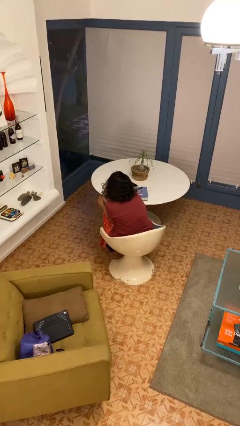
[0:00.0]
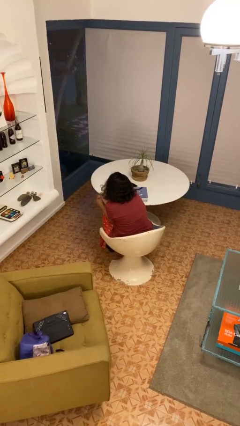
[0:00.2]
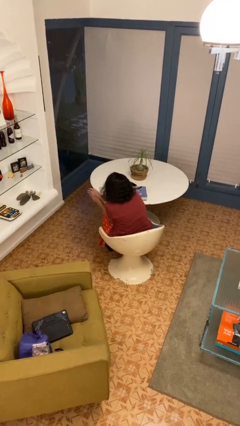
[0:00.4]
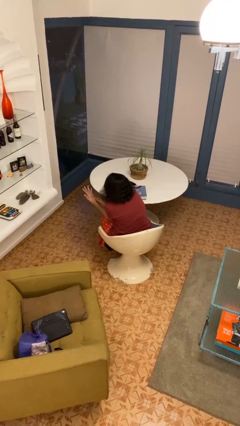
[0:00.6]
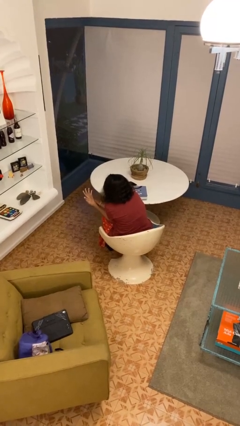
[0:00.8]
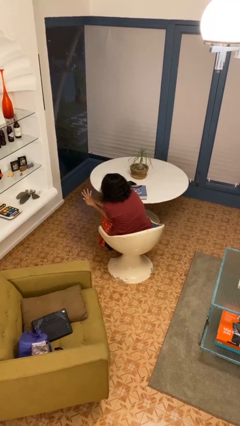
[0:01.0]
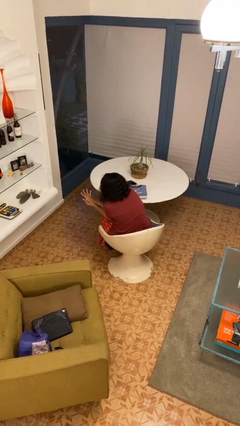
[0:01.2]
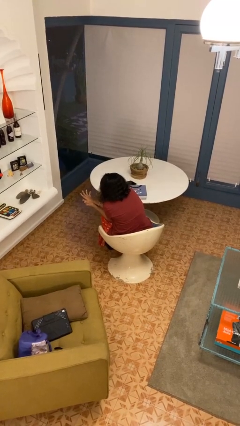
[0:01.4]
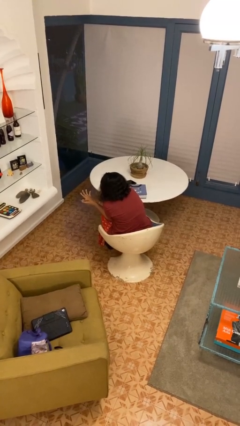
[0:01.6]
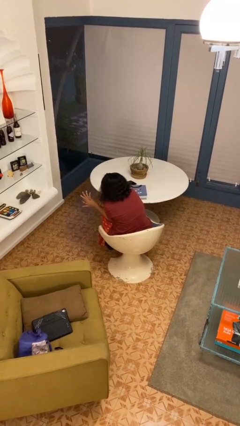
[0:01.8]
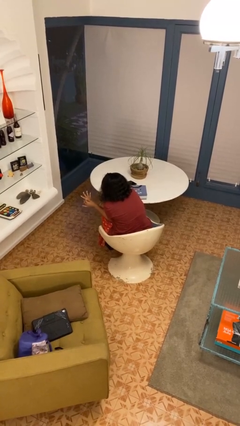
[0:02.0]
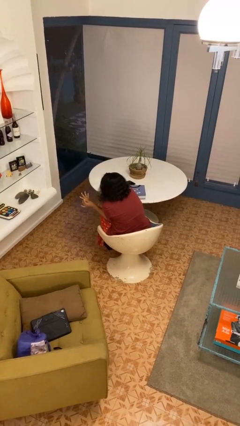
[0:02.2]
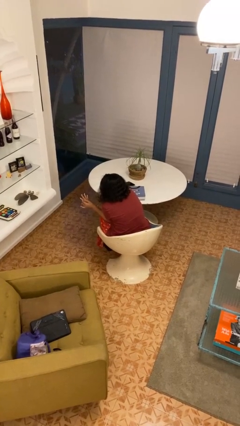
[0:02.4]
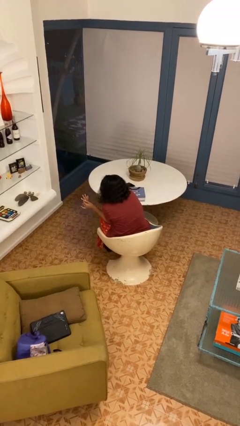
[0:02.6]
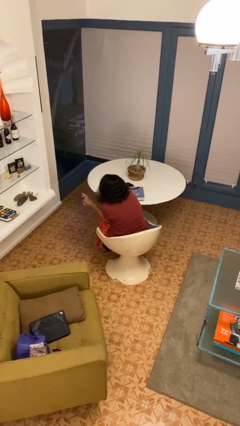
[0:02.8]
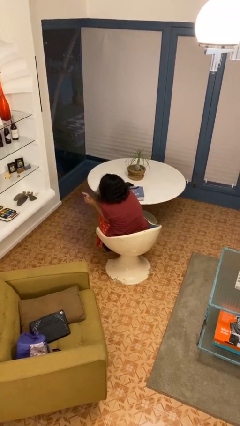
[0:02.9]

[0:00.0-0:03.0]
person looks at hands in lap

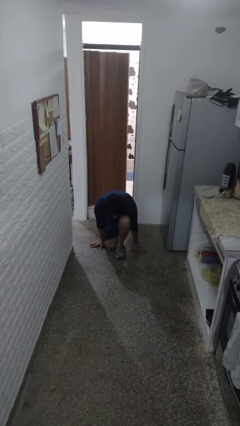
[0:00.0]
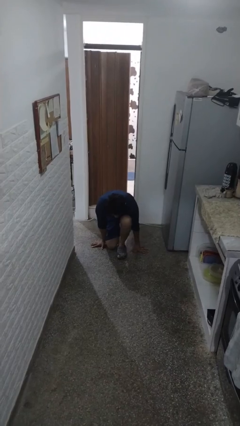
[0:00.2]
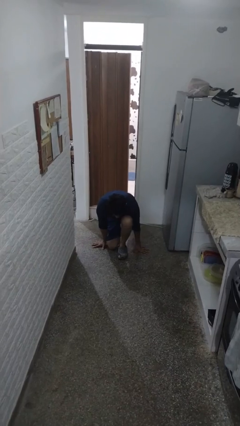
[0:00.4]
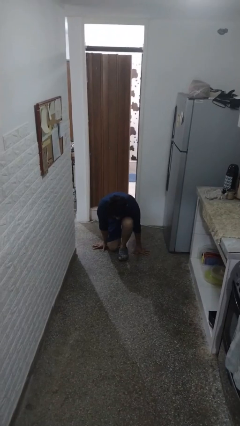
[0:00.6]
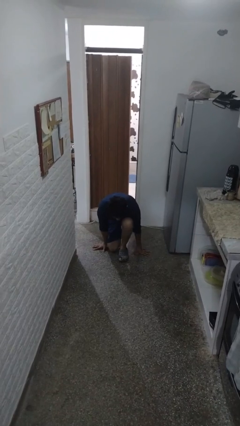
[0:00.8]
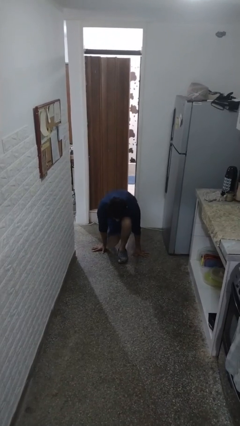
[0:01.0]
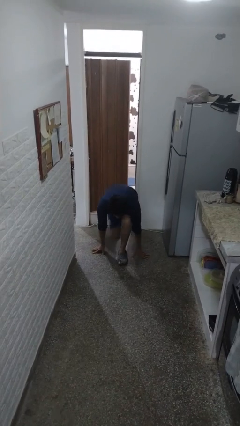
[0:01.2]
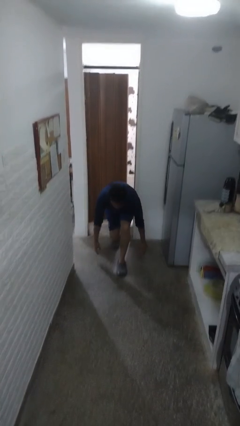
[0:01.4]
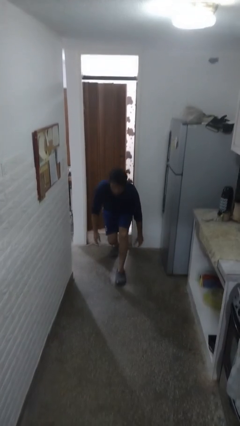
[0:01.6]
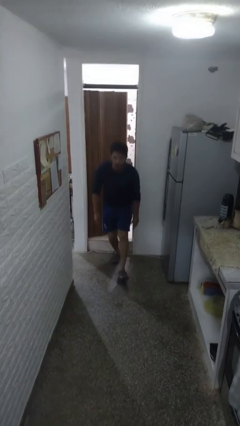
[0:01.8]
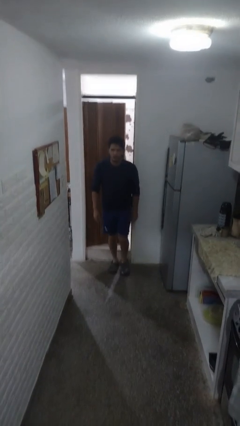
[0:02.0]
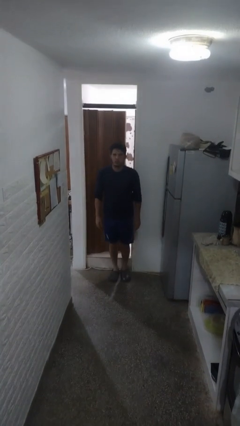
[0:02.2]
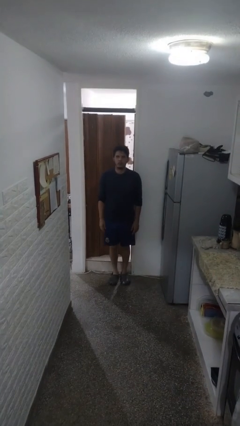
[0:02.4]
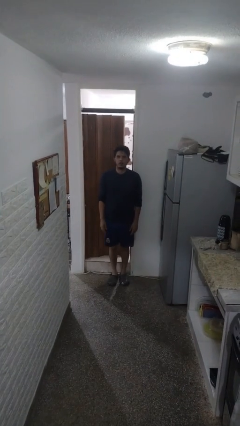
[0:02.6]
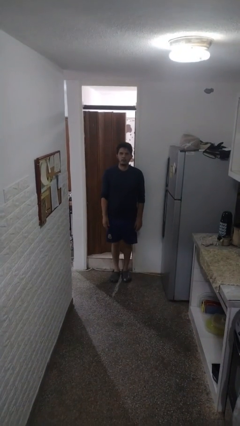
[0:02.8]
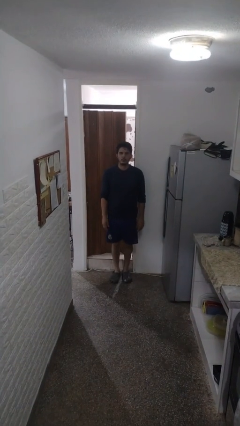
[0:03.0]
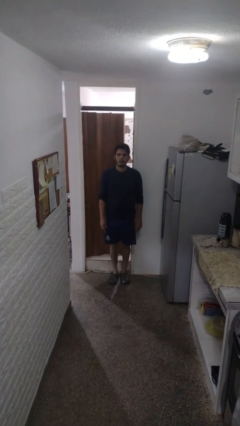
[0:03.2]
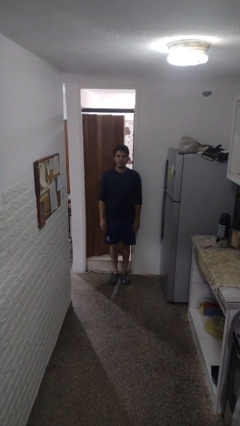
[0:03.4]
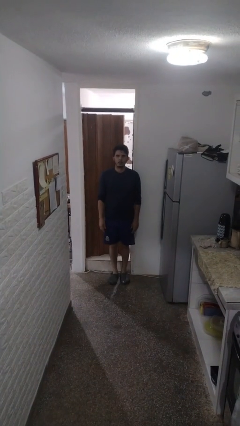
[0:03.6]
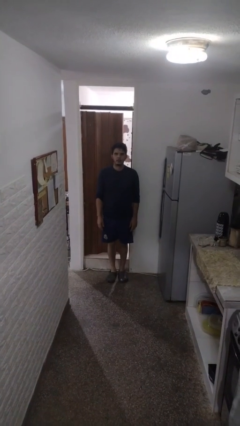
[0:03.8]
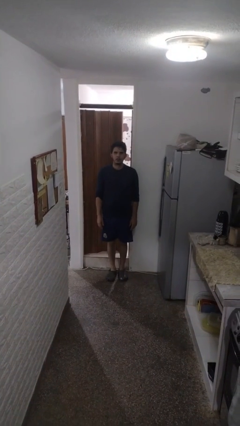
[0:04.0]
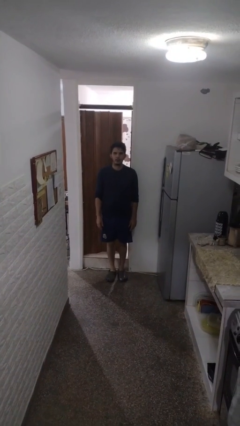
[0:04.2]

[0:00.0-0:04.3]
person stands up from floor

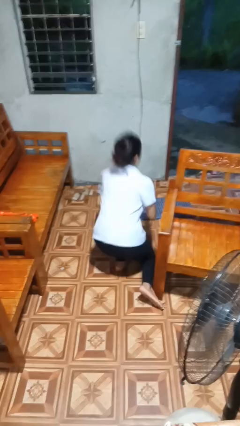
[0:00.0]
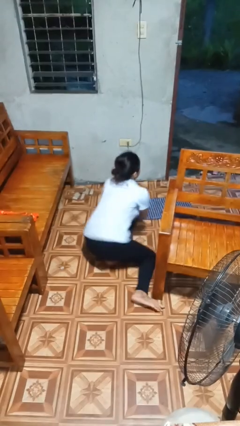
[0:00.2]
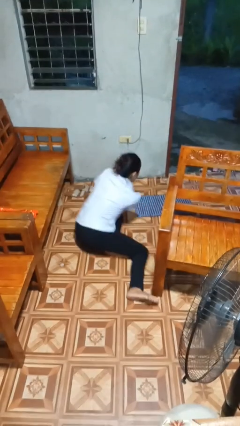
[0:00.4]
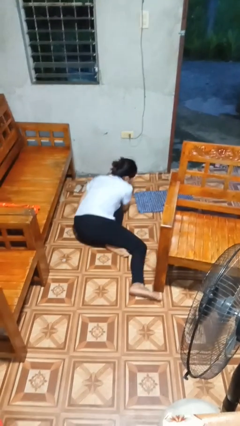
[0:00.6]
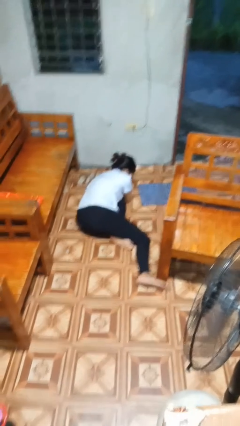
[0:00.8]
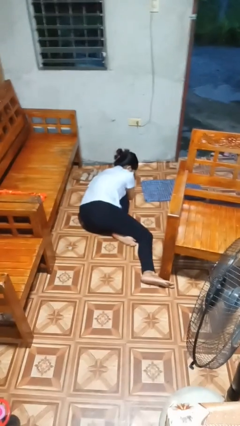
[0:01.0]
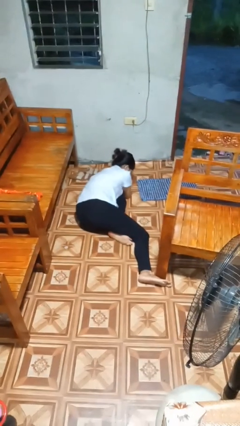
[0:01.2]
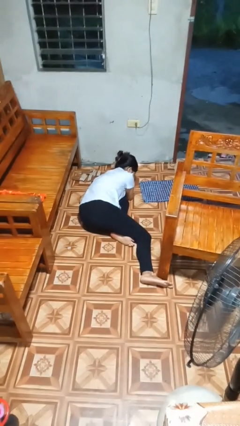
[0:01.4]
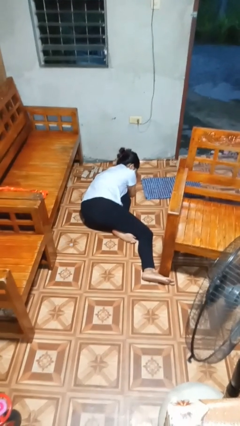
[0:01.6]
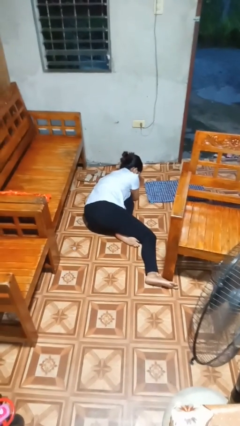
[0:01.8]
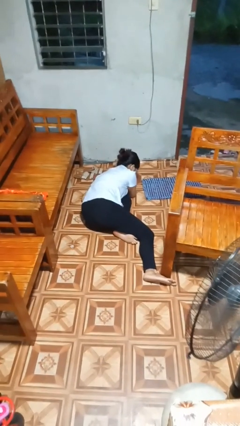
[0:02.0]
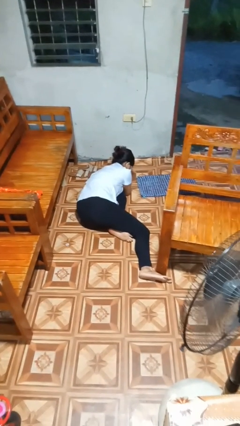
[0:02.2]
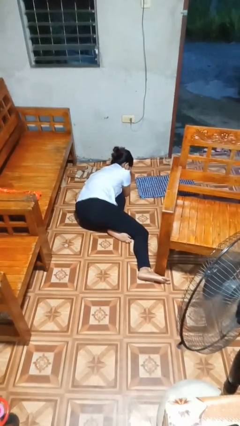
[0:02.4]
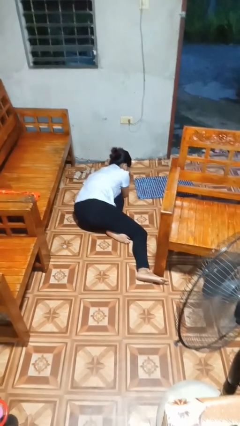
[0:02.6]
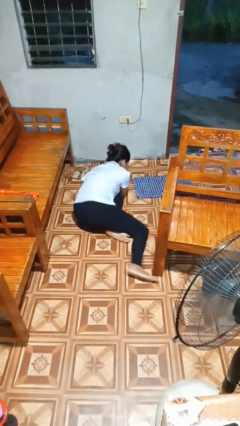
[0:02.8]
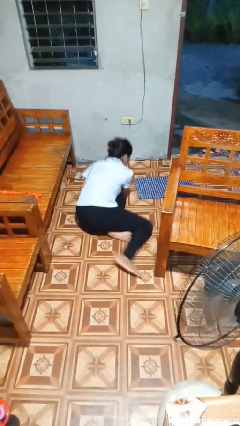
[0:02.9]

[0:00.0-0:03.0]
person lies down on floor

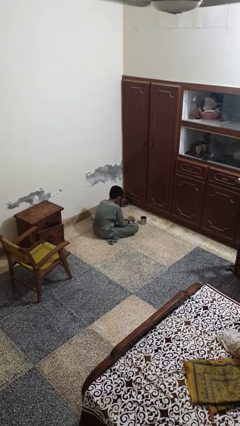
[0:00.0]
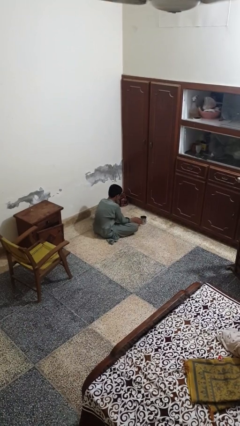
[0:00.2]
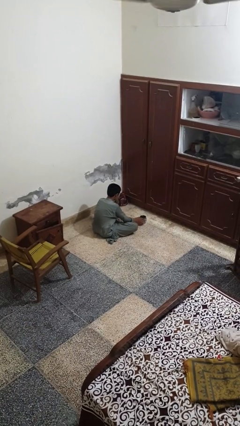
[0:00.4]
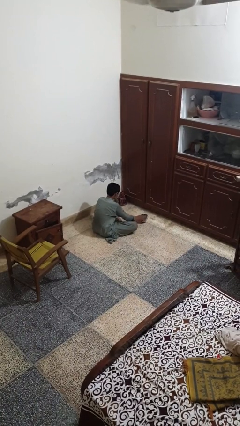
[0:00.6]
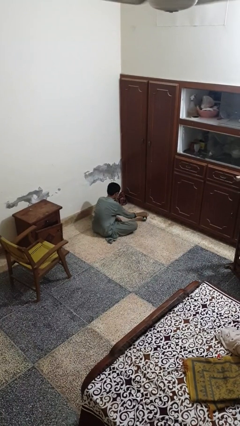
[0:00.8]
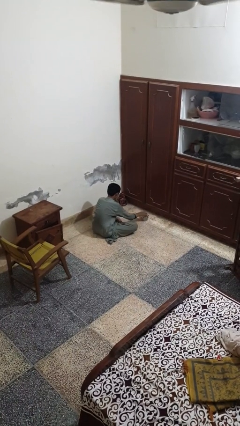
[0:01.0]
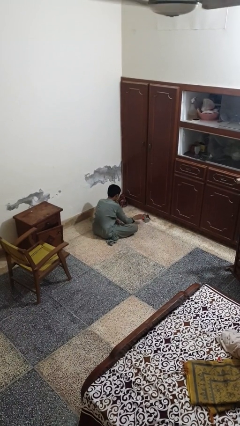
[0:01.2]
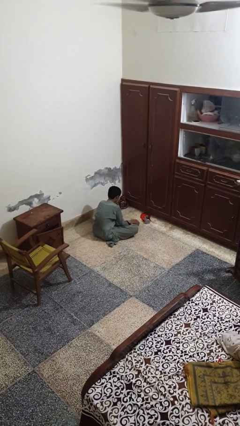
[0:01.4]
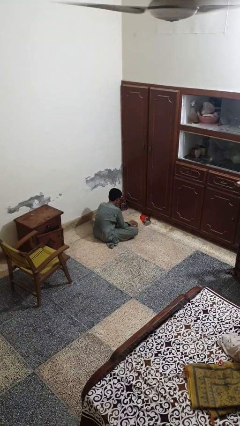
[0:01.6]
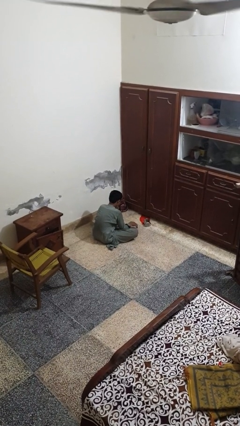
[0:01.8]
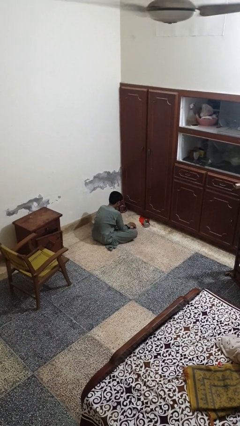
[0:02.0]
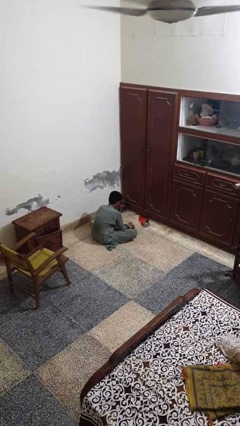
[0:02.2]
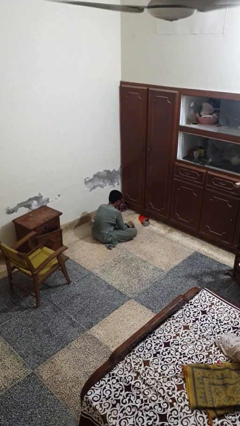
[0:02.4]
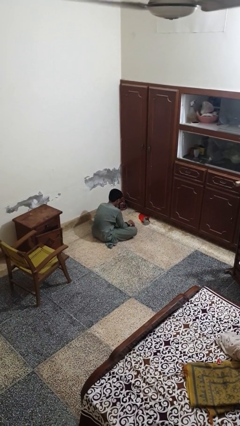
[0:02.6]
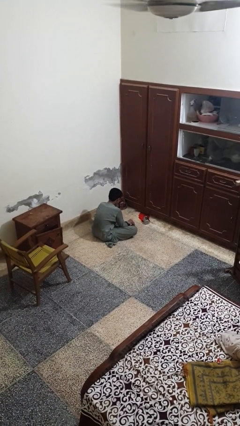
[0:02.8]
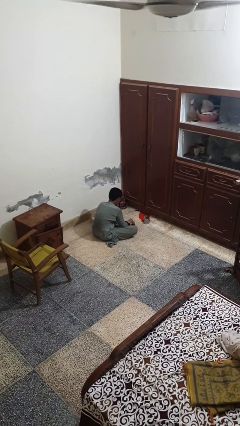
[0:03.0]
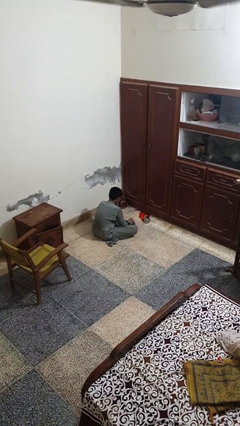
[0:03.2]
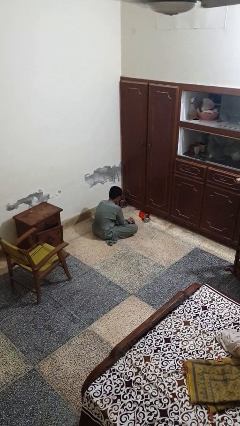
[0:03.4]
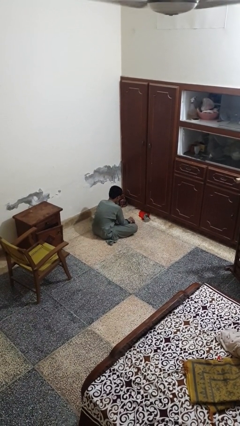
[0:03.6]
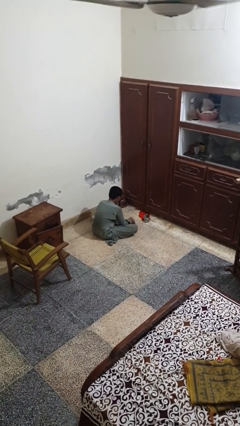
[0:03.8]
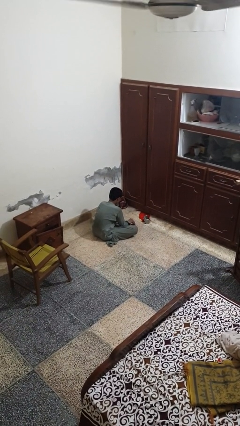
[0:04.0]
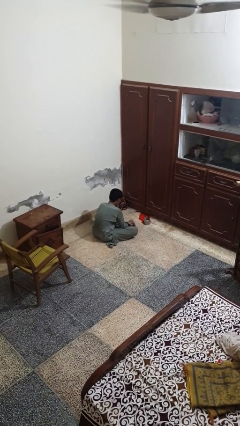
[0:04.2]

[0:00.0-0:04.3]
person spills on floor

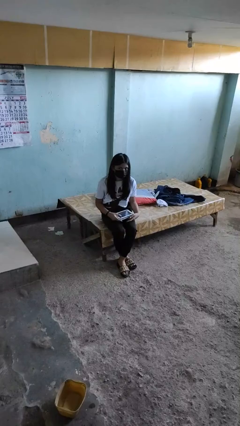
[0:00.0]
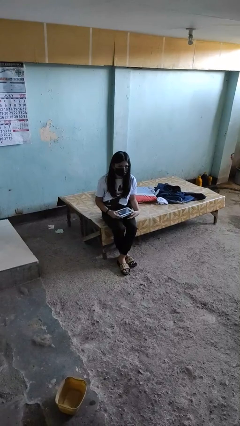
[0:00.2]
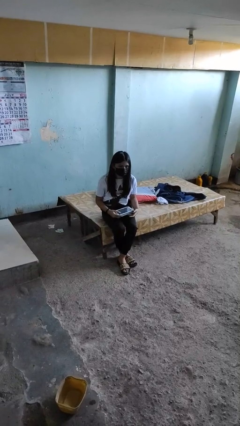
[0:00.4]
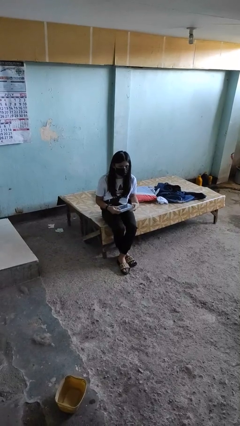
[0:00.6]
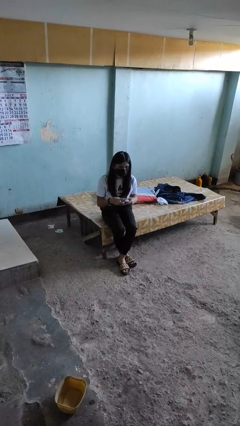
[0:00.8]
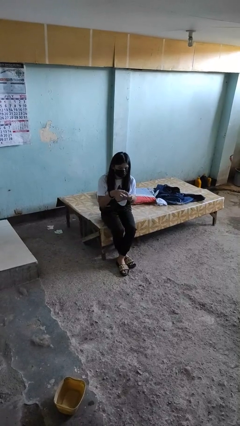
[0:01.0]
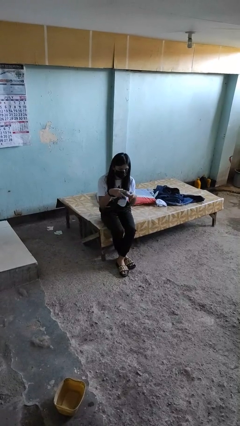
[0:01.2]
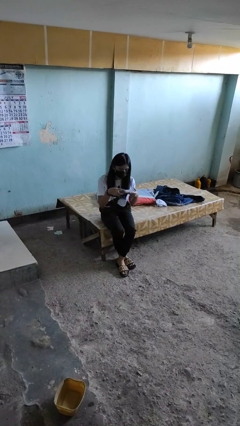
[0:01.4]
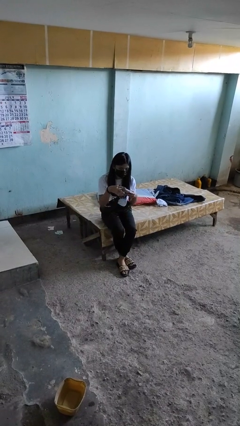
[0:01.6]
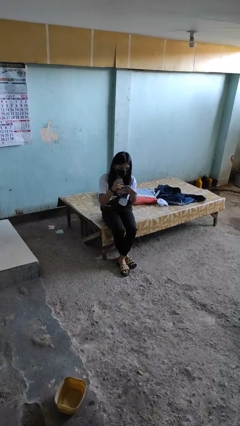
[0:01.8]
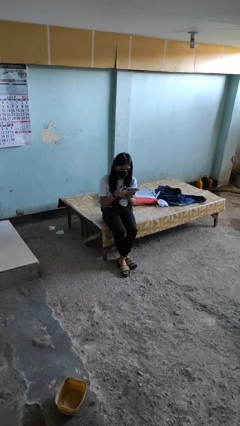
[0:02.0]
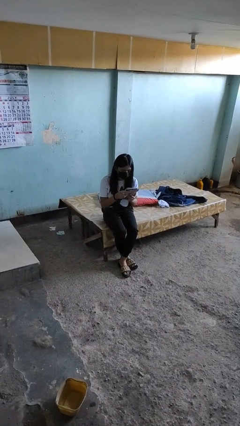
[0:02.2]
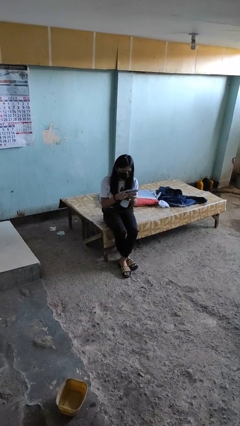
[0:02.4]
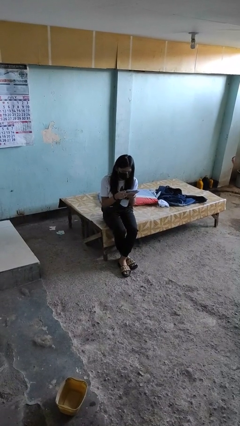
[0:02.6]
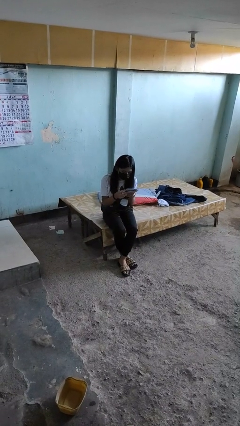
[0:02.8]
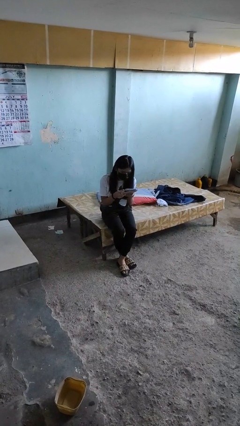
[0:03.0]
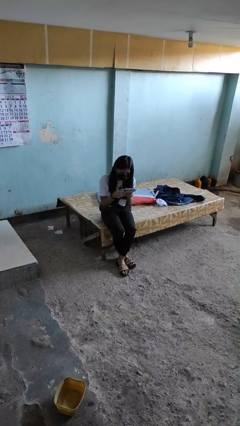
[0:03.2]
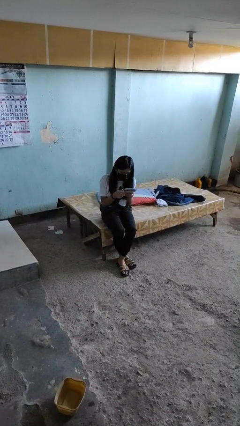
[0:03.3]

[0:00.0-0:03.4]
person interacts with tablet
